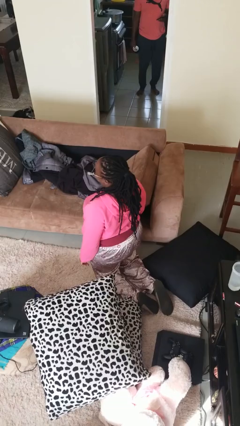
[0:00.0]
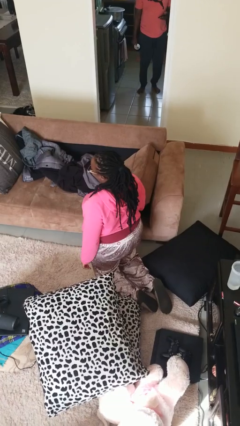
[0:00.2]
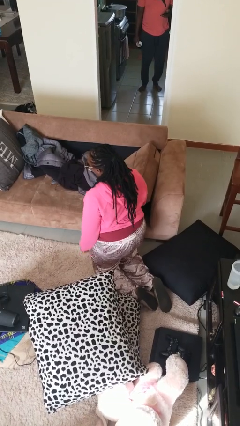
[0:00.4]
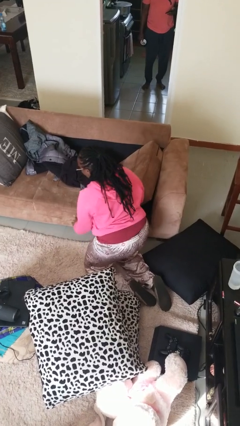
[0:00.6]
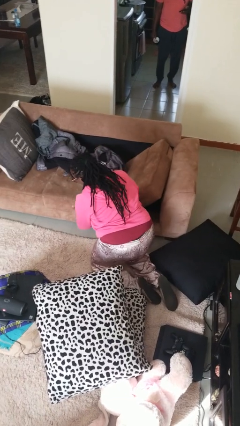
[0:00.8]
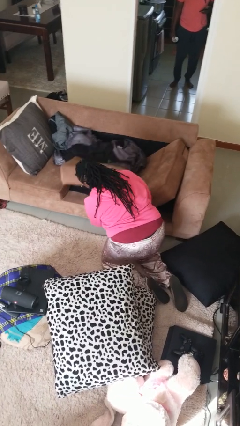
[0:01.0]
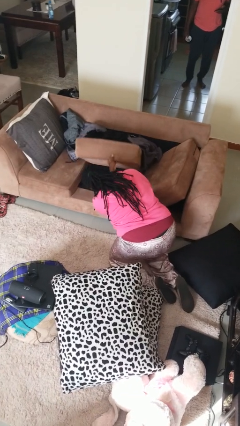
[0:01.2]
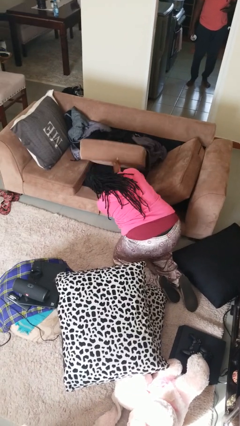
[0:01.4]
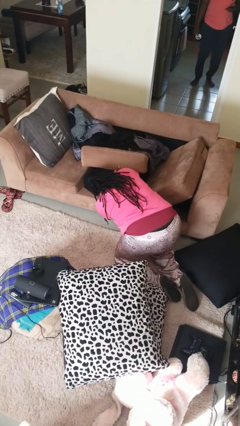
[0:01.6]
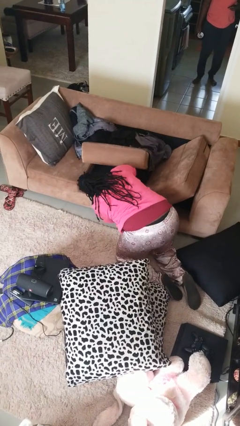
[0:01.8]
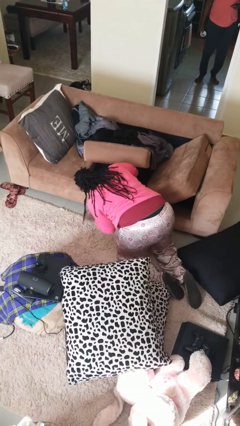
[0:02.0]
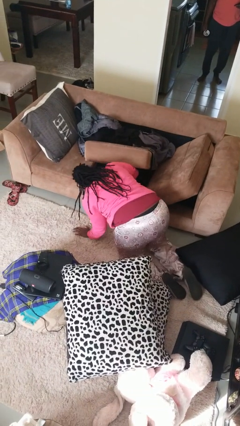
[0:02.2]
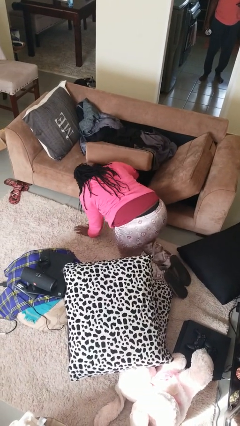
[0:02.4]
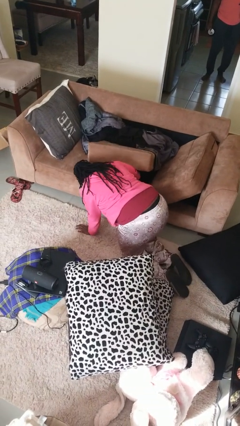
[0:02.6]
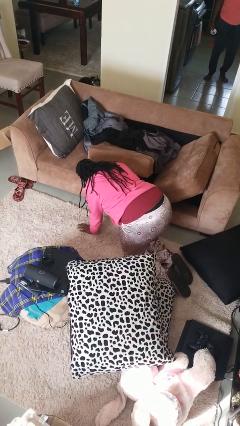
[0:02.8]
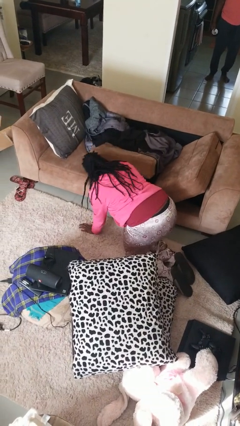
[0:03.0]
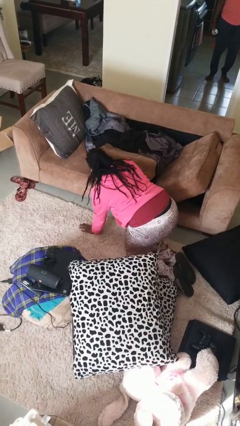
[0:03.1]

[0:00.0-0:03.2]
person searches under couch

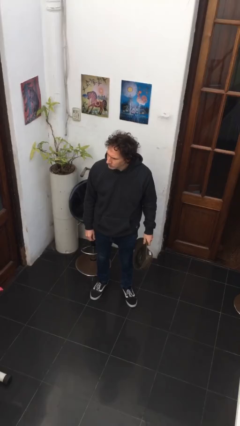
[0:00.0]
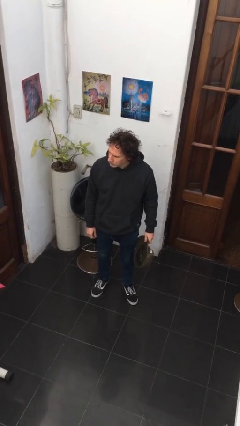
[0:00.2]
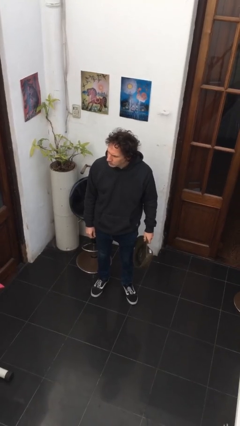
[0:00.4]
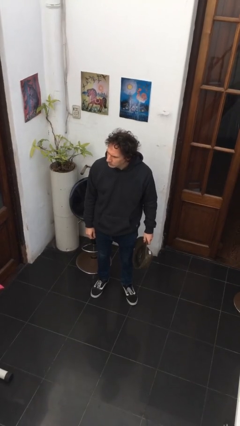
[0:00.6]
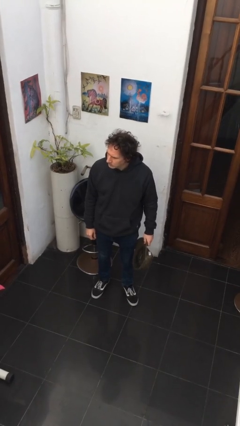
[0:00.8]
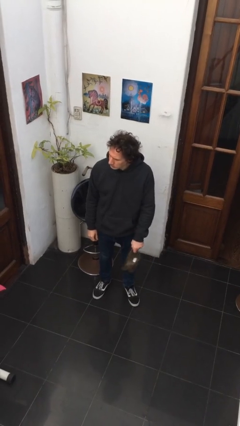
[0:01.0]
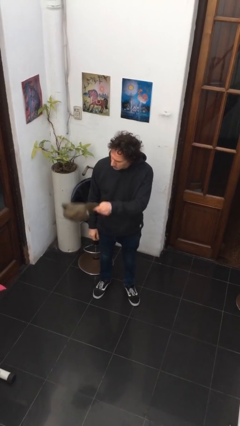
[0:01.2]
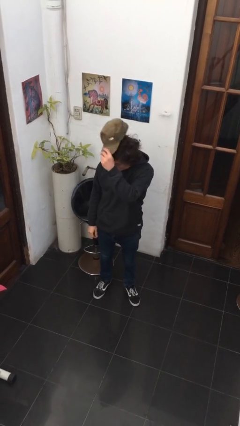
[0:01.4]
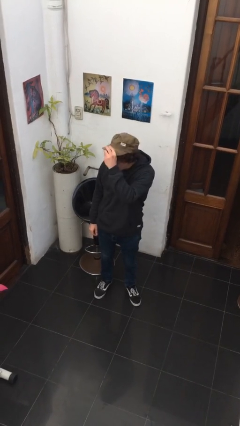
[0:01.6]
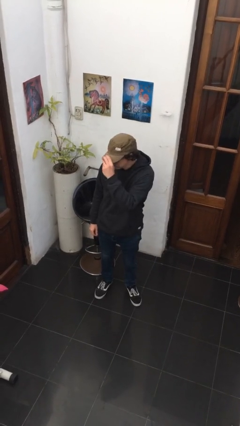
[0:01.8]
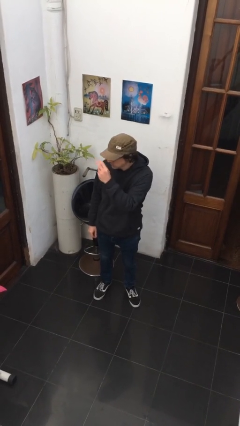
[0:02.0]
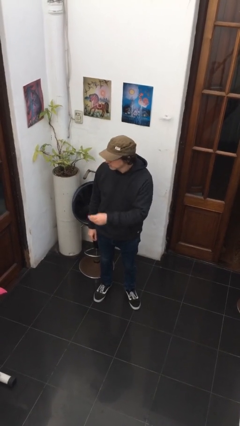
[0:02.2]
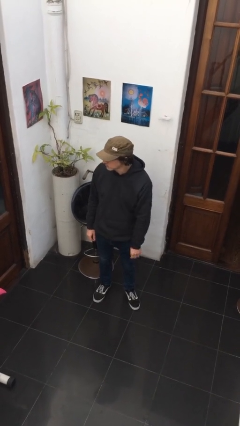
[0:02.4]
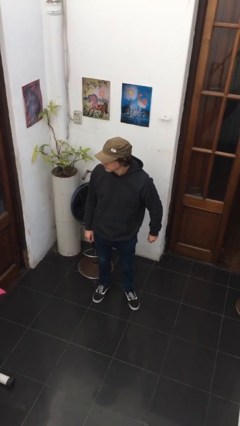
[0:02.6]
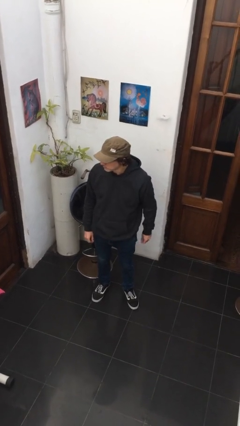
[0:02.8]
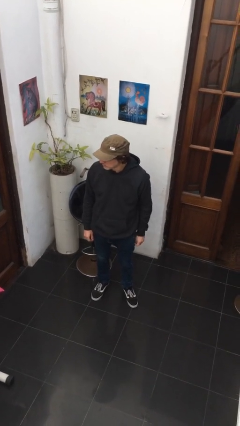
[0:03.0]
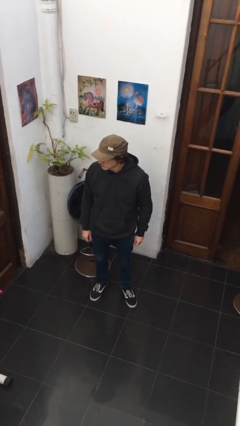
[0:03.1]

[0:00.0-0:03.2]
person puts on hat

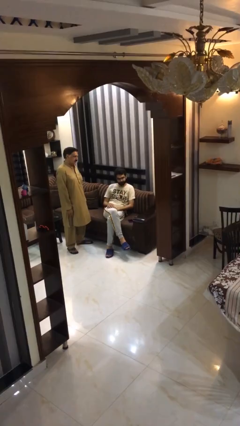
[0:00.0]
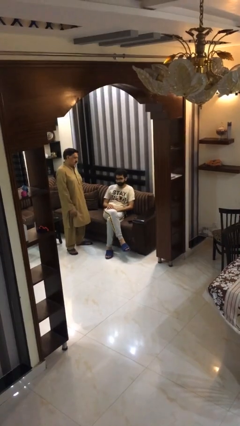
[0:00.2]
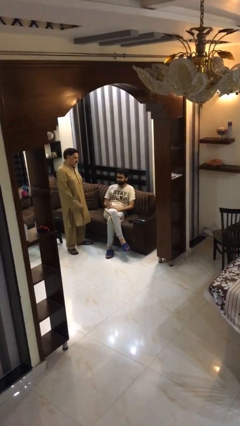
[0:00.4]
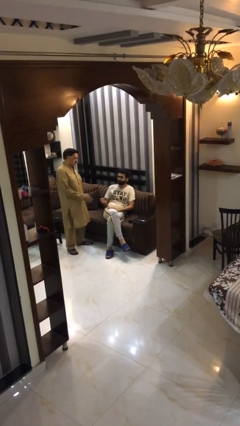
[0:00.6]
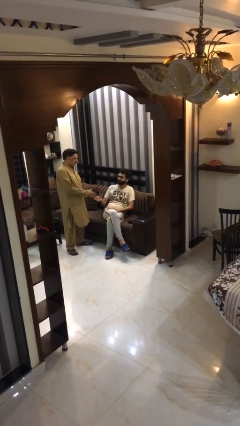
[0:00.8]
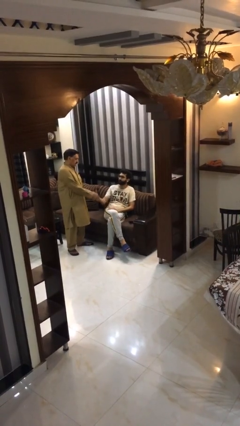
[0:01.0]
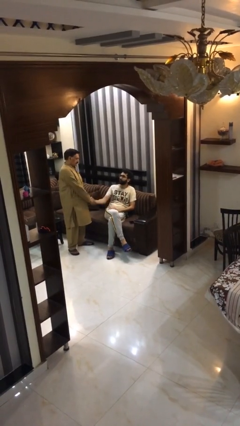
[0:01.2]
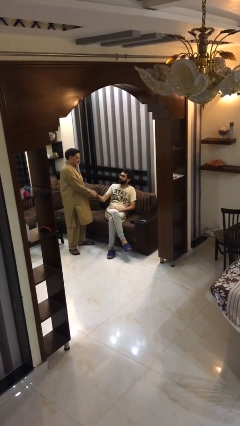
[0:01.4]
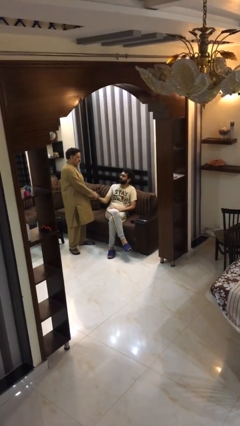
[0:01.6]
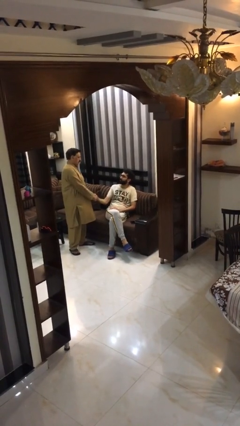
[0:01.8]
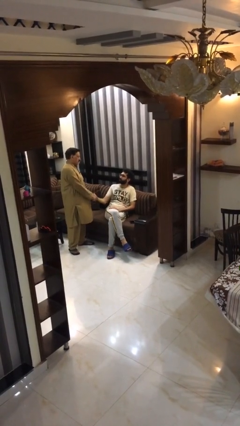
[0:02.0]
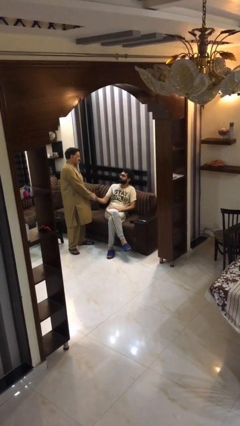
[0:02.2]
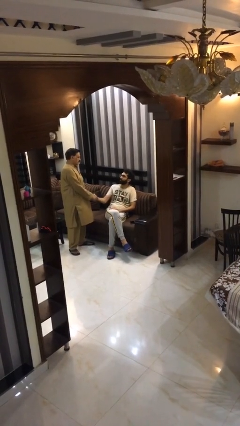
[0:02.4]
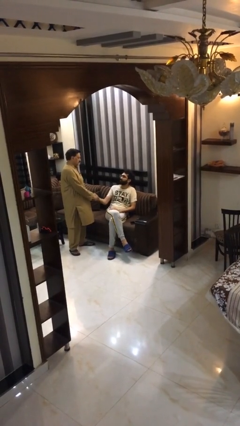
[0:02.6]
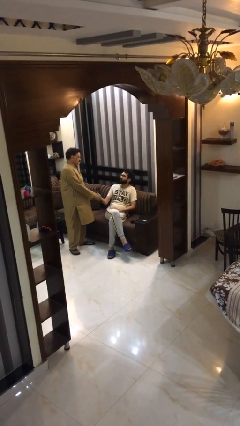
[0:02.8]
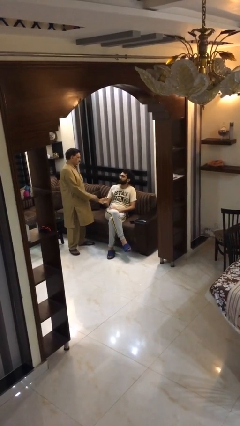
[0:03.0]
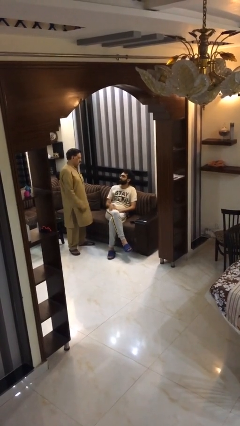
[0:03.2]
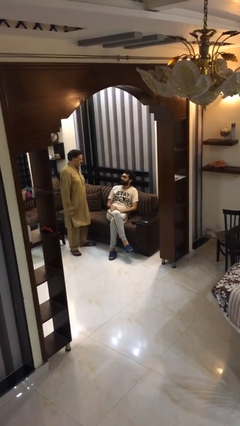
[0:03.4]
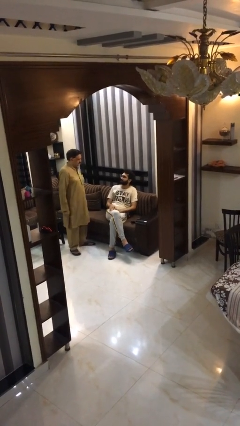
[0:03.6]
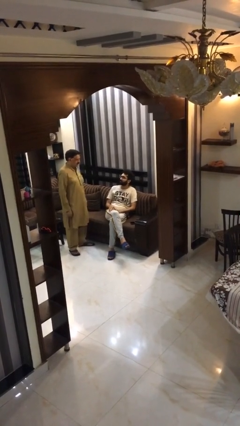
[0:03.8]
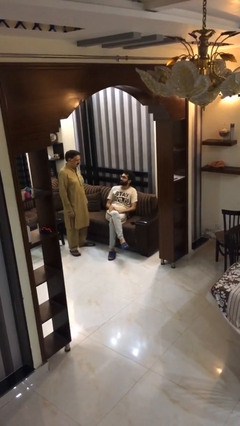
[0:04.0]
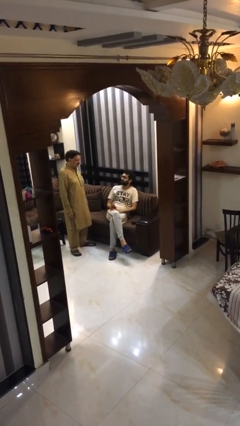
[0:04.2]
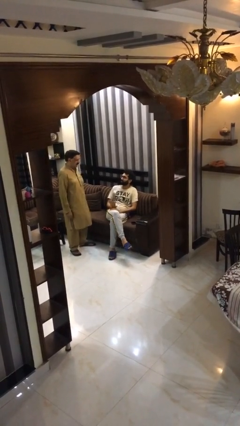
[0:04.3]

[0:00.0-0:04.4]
person shakes hand

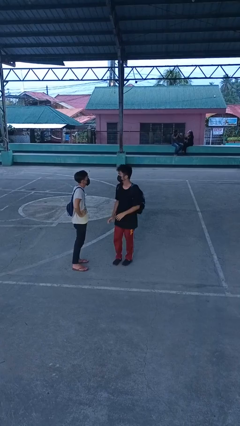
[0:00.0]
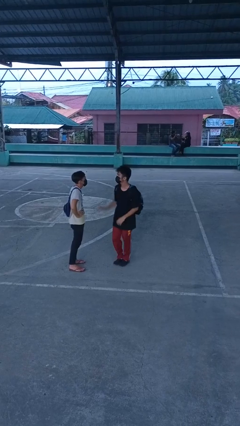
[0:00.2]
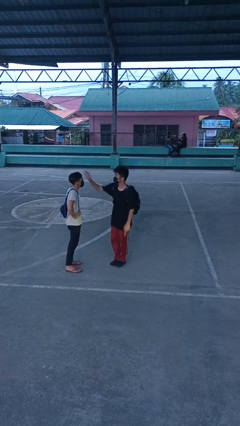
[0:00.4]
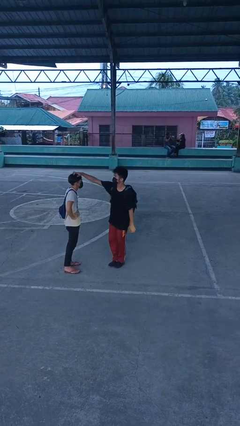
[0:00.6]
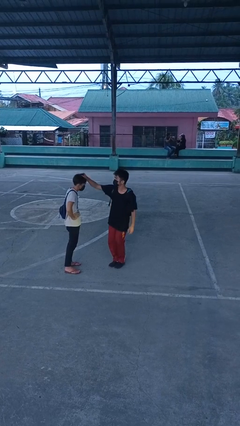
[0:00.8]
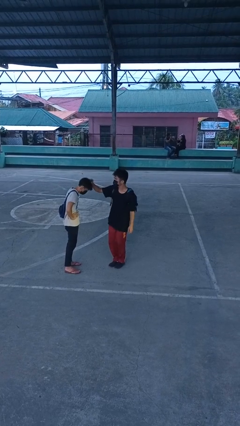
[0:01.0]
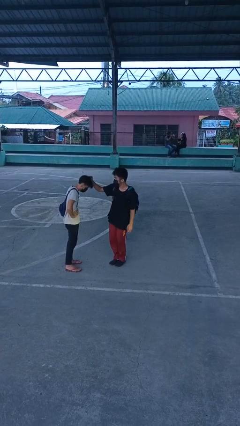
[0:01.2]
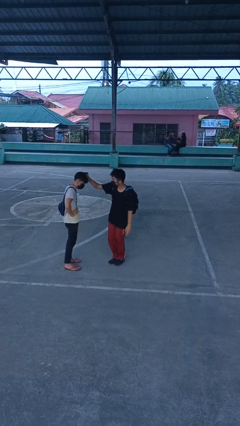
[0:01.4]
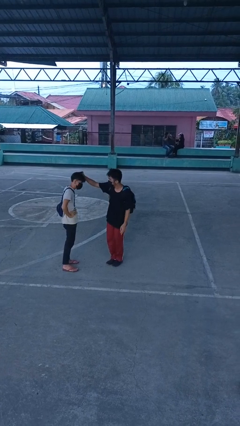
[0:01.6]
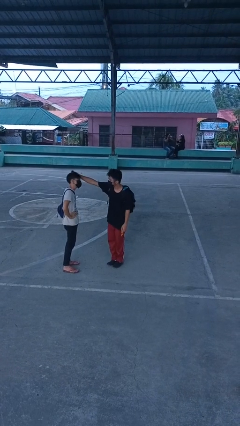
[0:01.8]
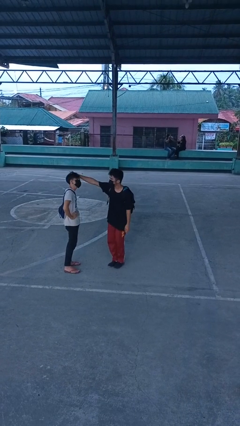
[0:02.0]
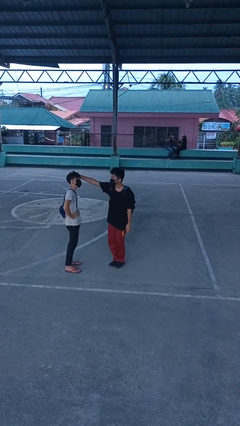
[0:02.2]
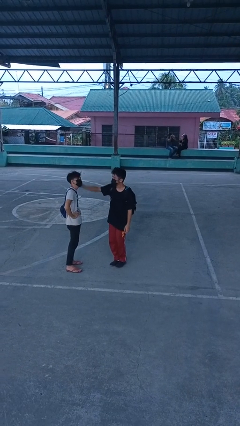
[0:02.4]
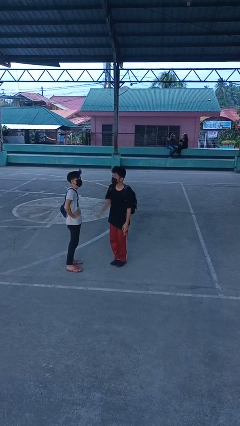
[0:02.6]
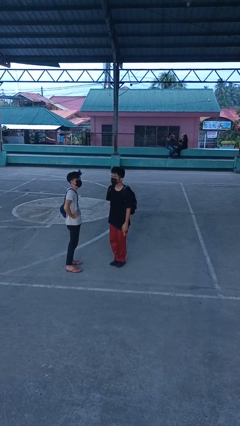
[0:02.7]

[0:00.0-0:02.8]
person grabs person by hair

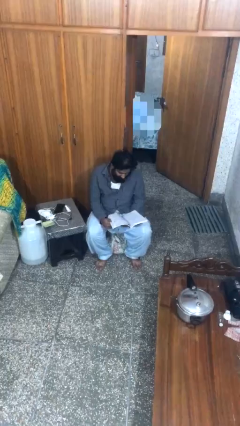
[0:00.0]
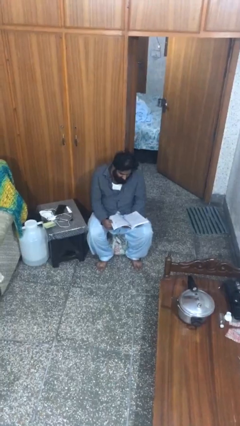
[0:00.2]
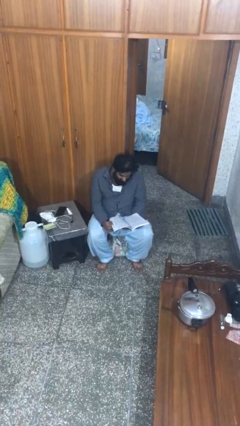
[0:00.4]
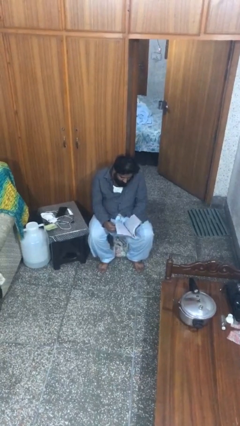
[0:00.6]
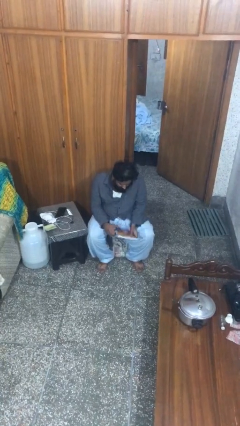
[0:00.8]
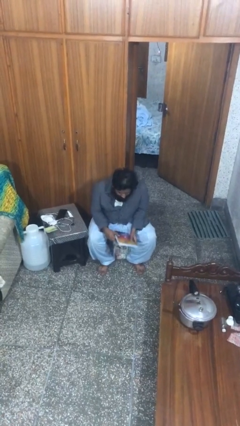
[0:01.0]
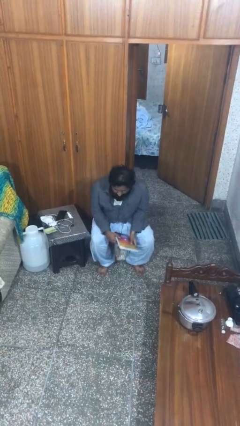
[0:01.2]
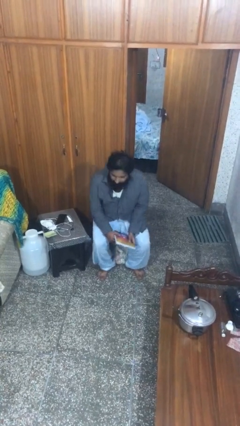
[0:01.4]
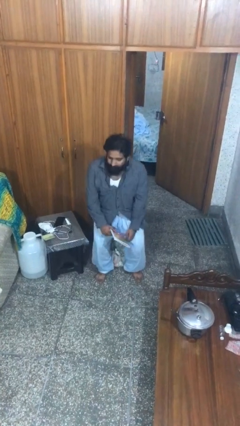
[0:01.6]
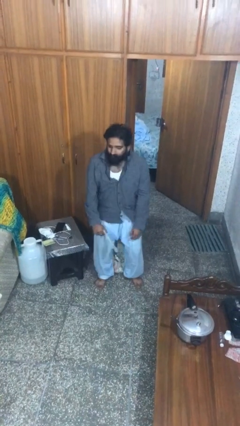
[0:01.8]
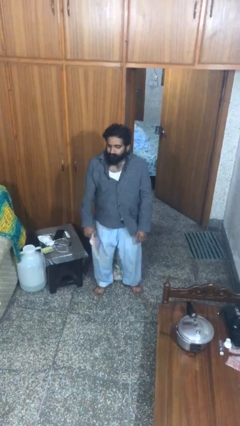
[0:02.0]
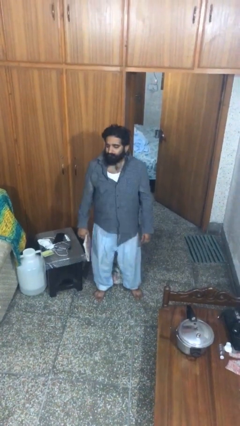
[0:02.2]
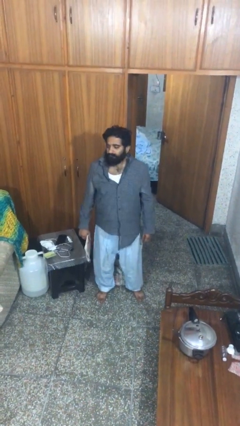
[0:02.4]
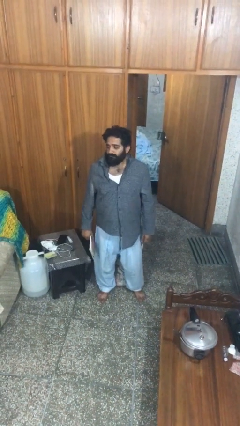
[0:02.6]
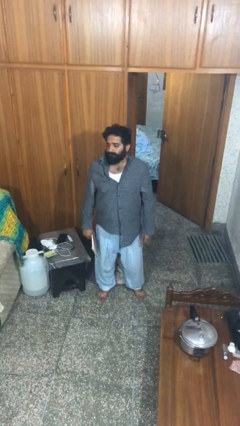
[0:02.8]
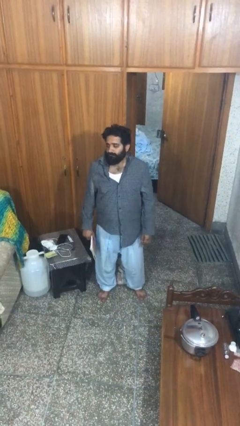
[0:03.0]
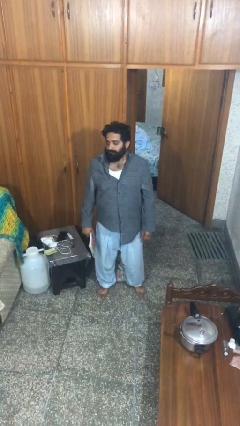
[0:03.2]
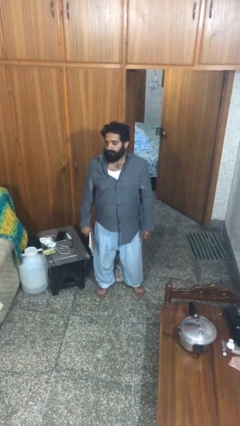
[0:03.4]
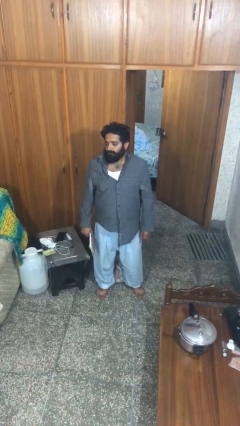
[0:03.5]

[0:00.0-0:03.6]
person stands up
